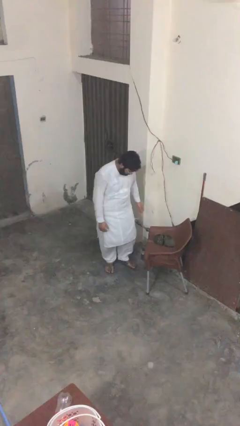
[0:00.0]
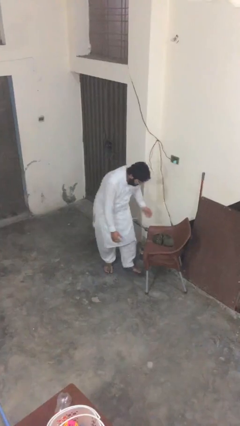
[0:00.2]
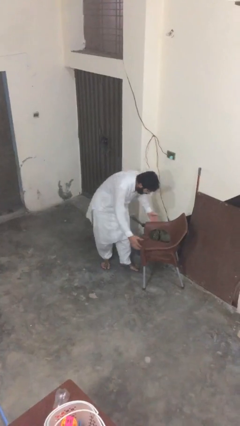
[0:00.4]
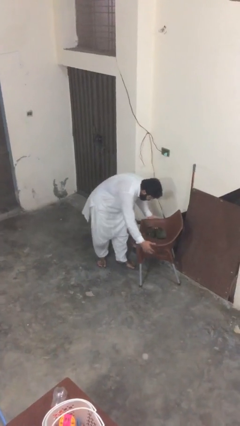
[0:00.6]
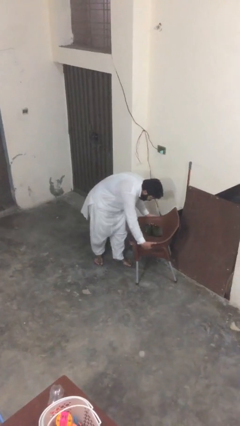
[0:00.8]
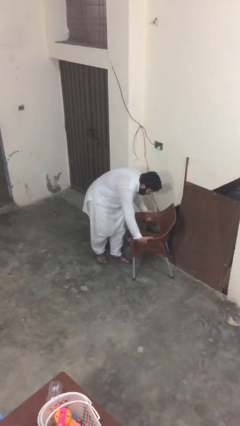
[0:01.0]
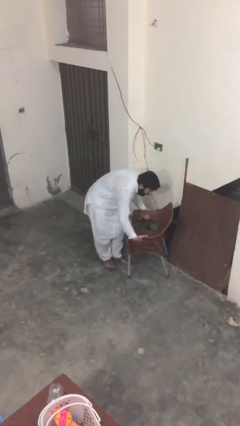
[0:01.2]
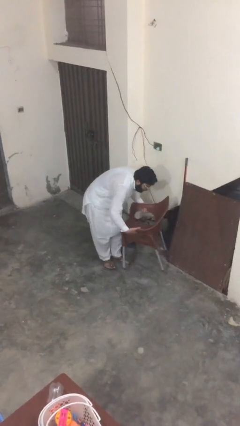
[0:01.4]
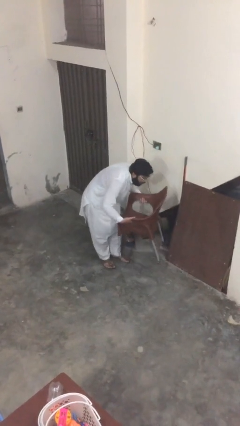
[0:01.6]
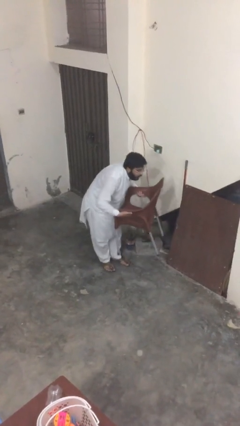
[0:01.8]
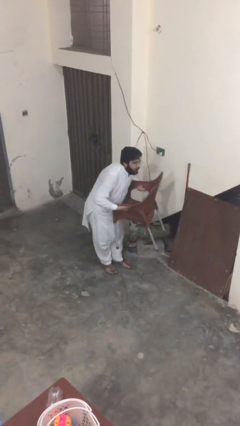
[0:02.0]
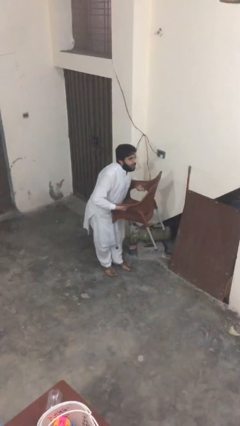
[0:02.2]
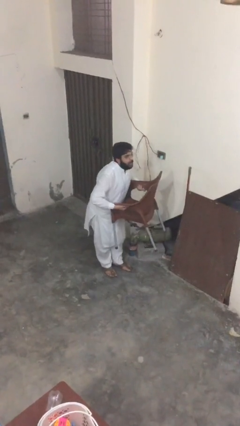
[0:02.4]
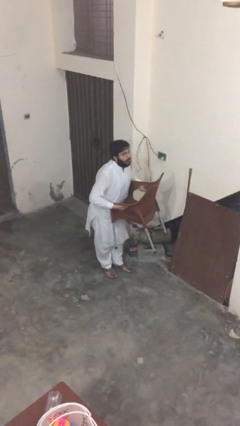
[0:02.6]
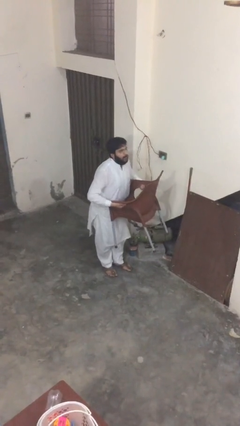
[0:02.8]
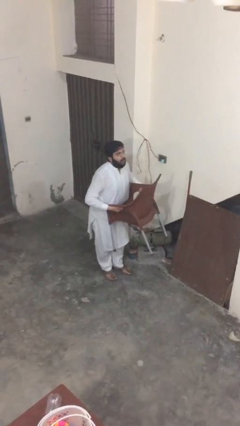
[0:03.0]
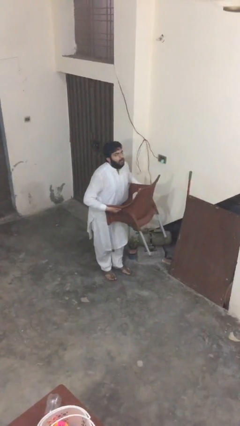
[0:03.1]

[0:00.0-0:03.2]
person picks up object from floor

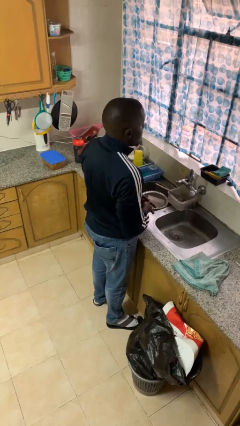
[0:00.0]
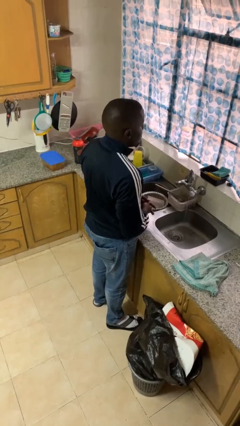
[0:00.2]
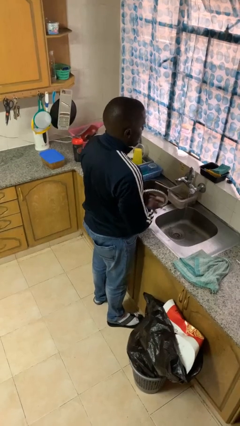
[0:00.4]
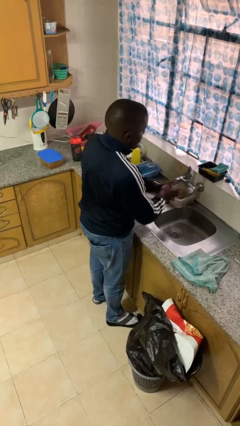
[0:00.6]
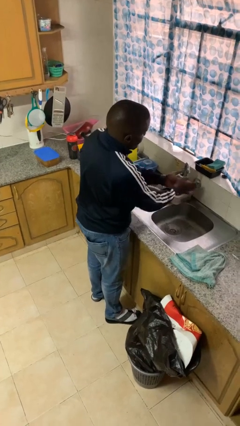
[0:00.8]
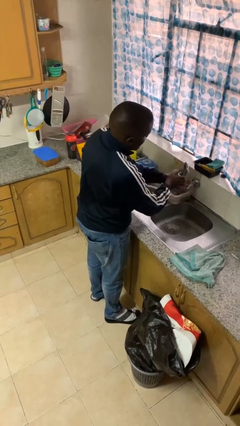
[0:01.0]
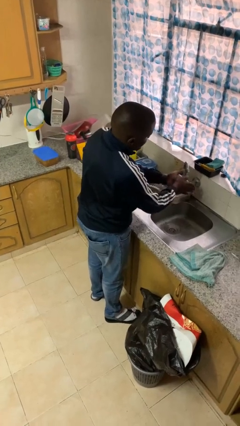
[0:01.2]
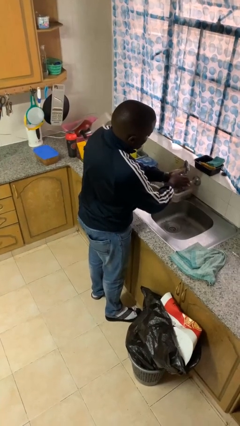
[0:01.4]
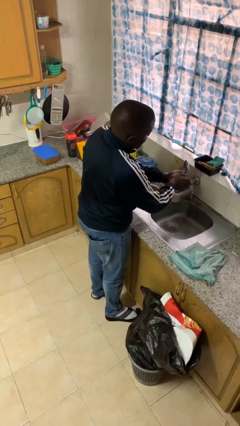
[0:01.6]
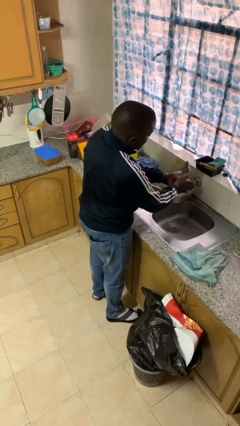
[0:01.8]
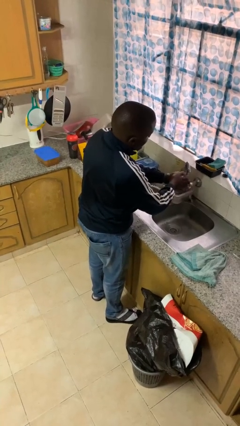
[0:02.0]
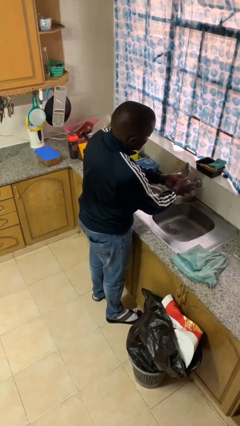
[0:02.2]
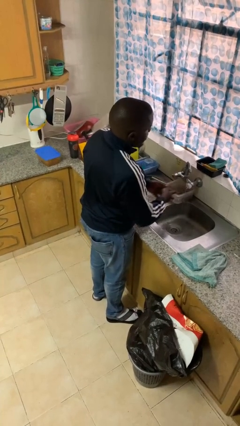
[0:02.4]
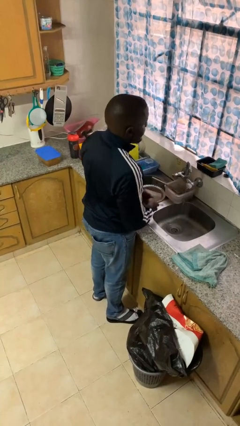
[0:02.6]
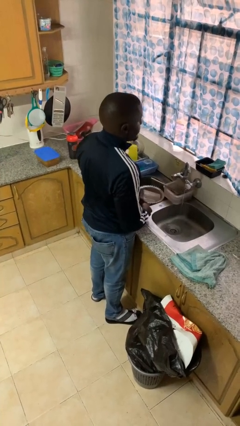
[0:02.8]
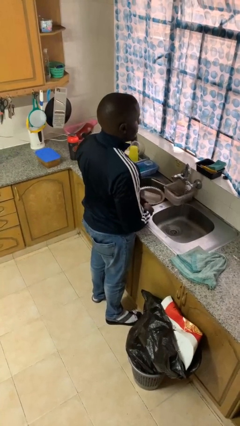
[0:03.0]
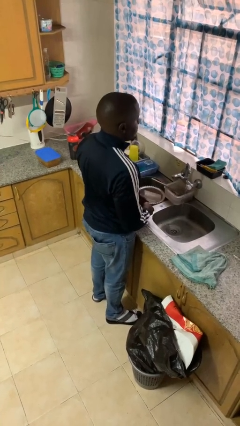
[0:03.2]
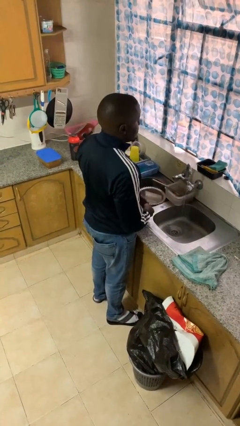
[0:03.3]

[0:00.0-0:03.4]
person washes hands

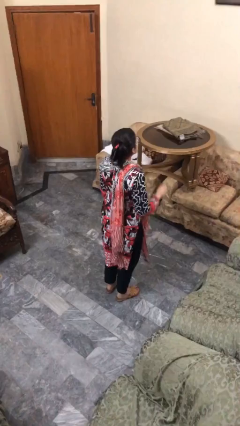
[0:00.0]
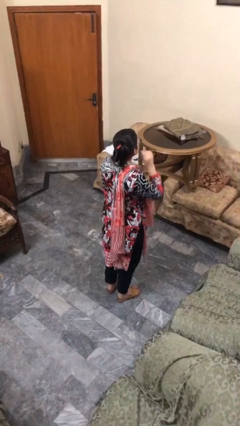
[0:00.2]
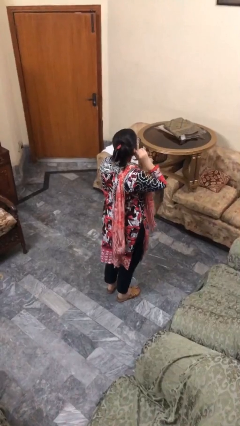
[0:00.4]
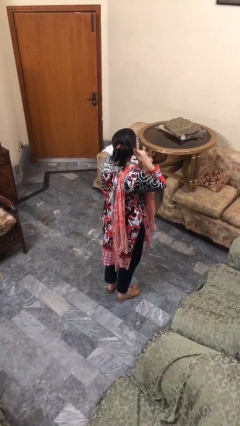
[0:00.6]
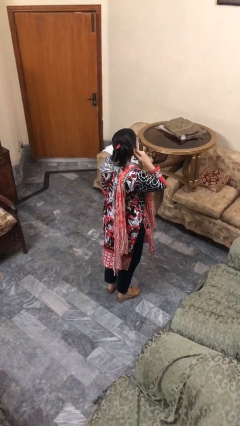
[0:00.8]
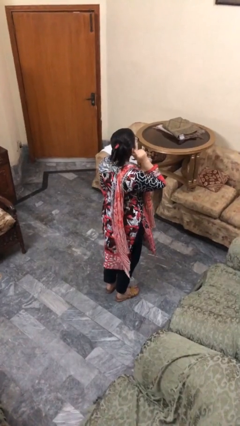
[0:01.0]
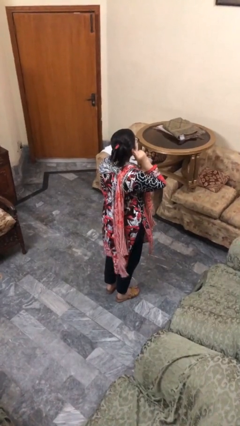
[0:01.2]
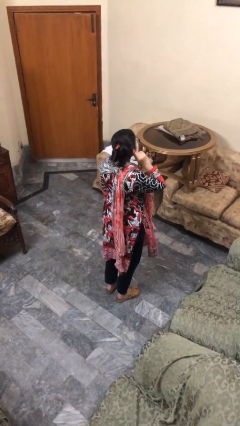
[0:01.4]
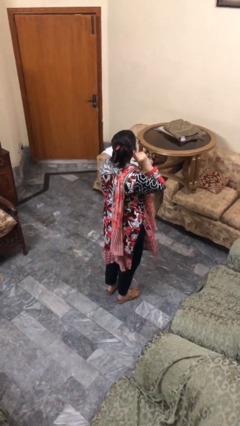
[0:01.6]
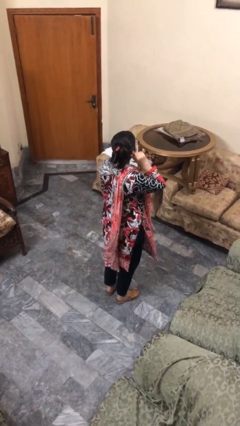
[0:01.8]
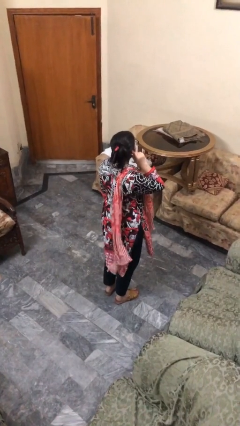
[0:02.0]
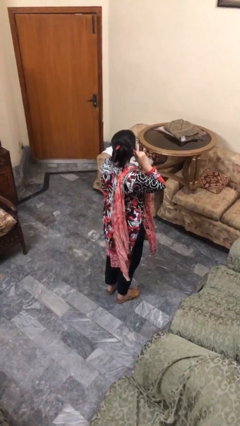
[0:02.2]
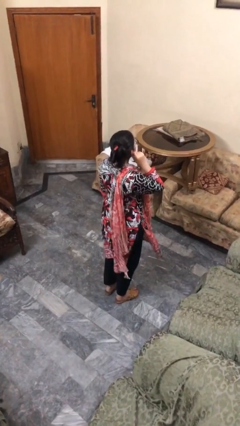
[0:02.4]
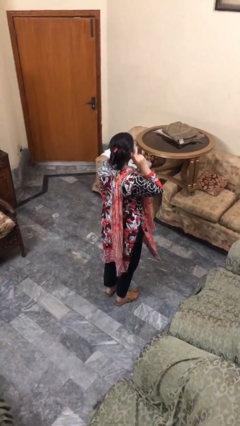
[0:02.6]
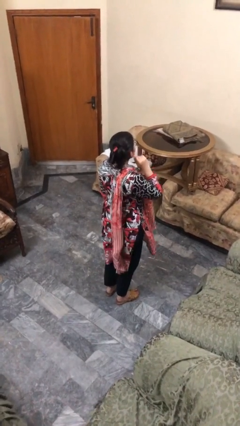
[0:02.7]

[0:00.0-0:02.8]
person touches earlobe

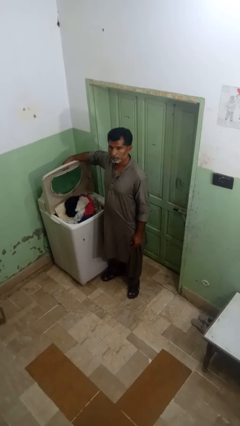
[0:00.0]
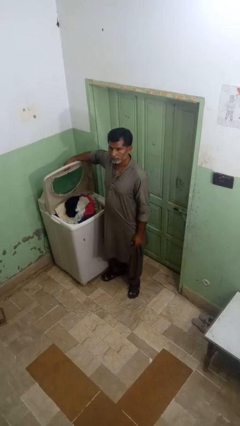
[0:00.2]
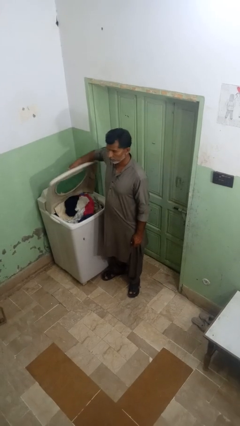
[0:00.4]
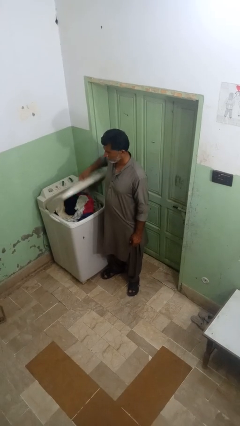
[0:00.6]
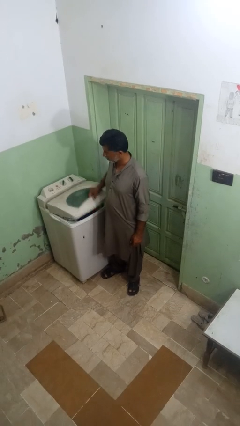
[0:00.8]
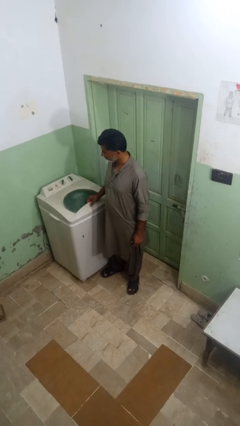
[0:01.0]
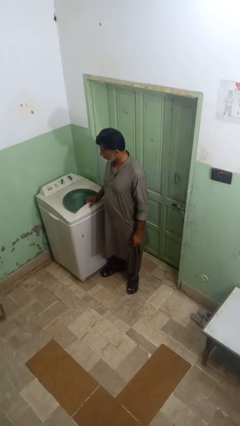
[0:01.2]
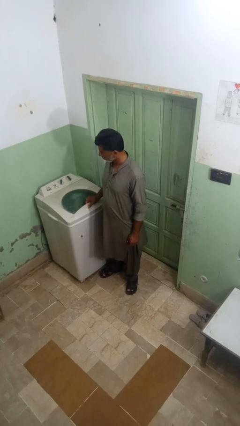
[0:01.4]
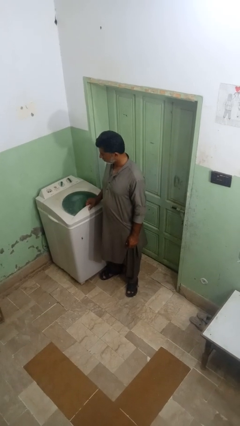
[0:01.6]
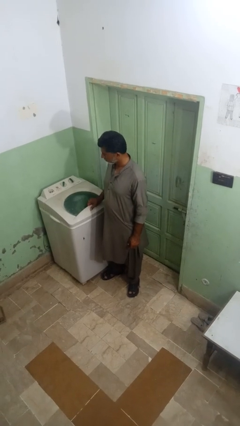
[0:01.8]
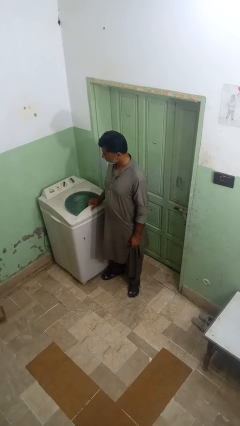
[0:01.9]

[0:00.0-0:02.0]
person closes clothes washer

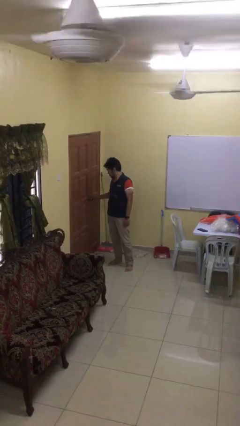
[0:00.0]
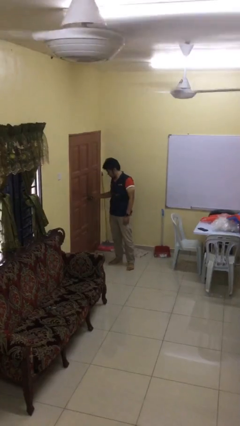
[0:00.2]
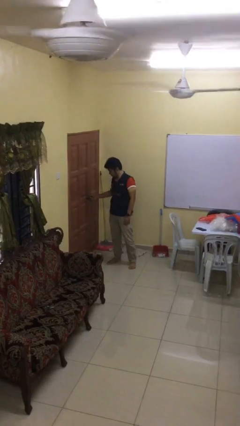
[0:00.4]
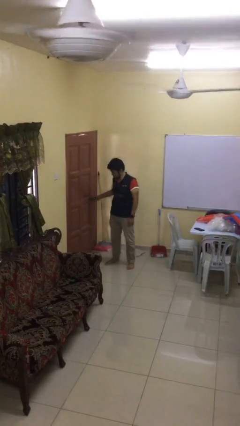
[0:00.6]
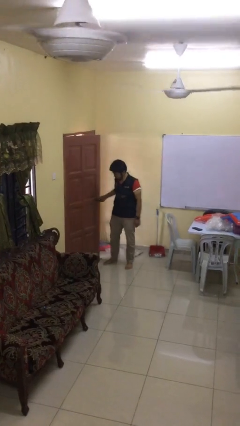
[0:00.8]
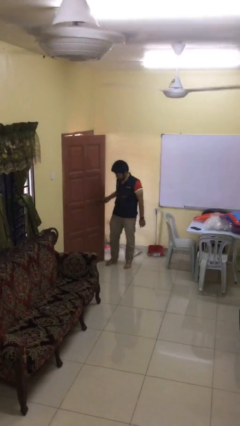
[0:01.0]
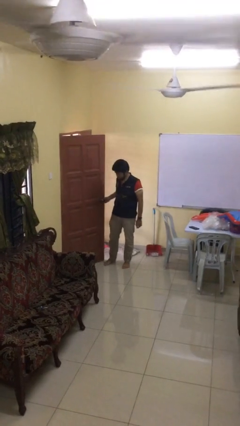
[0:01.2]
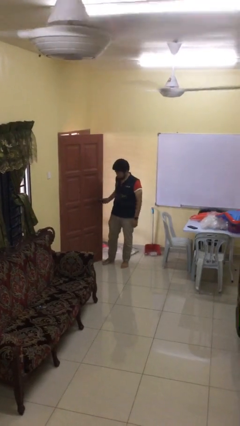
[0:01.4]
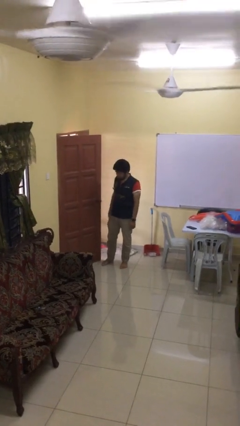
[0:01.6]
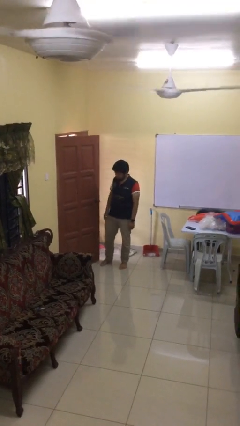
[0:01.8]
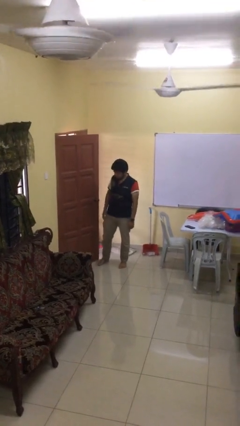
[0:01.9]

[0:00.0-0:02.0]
person opens facility door

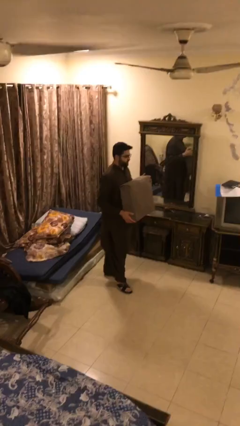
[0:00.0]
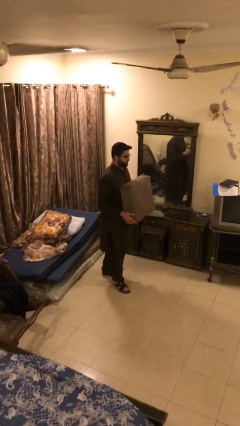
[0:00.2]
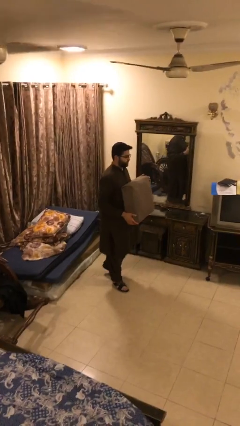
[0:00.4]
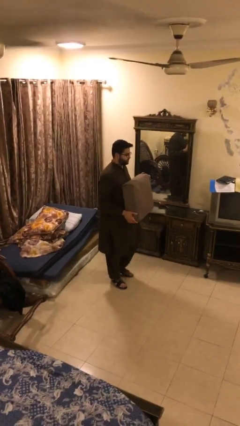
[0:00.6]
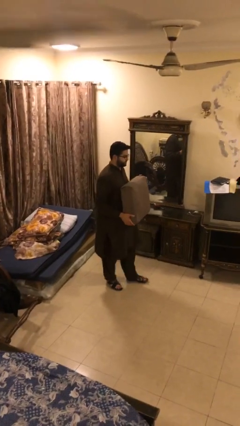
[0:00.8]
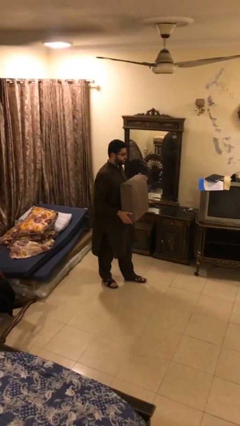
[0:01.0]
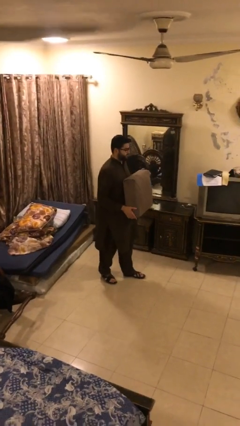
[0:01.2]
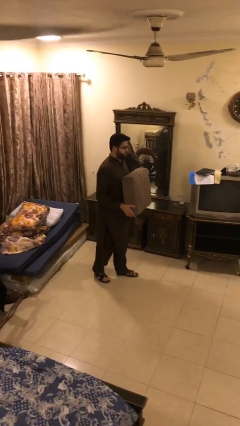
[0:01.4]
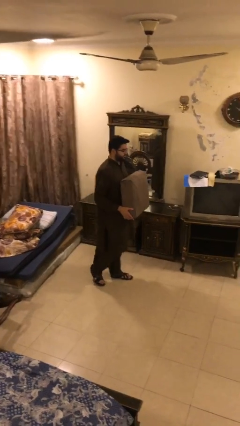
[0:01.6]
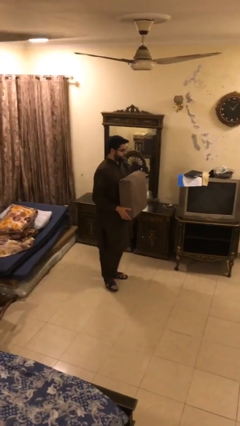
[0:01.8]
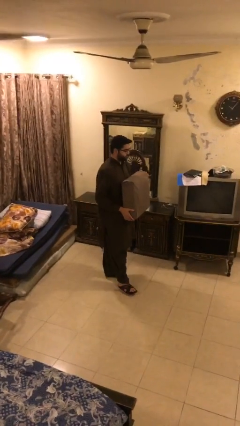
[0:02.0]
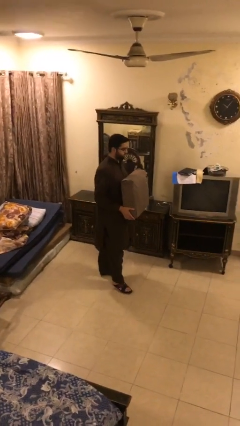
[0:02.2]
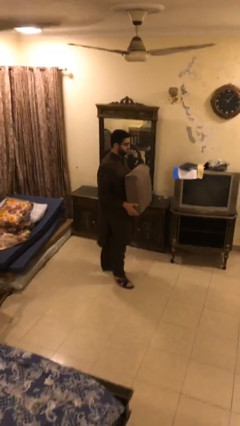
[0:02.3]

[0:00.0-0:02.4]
person carries heavy object

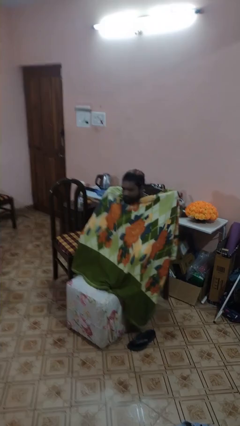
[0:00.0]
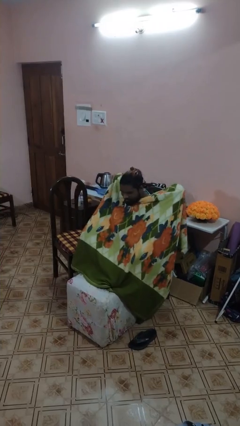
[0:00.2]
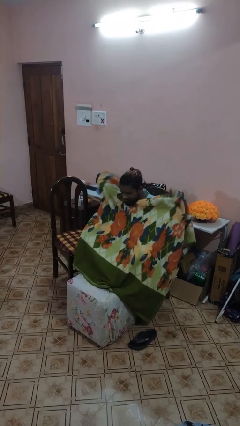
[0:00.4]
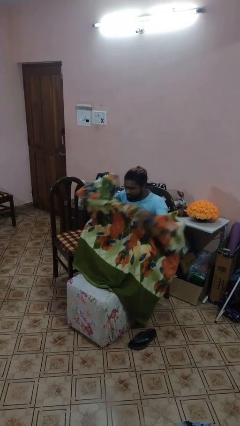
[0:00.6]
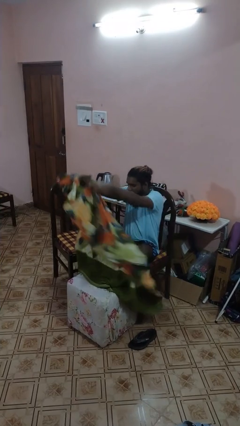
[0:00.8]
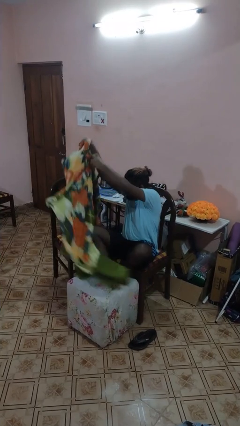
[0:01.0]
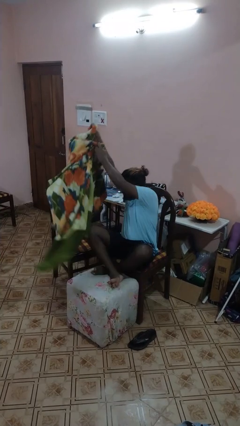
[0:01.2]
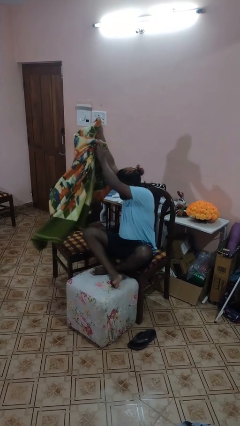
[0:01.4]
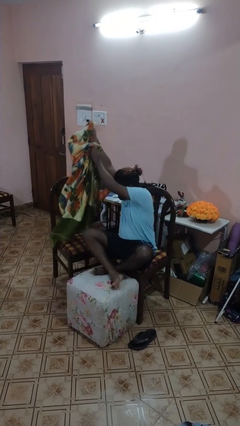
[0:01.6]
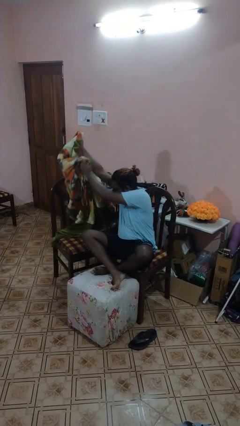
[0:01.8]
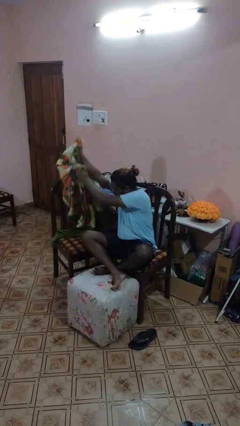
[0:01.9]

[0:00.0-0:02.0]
person uncovers with blanket
